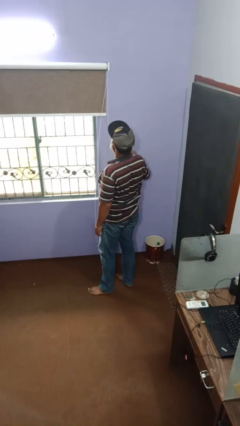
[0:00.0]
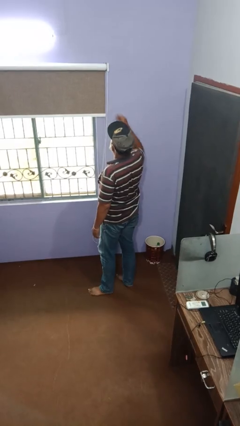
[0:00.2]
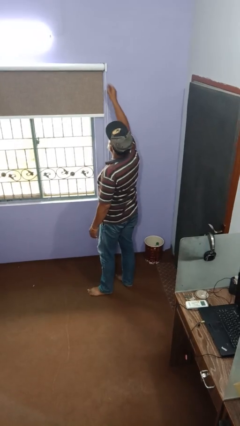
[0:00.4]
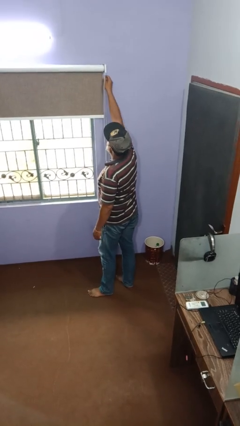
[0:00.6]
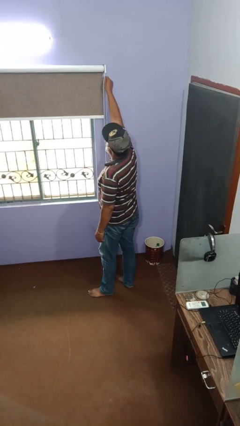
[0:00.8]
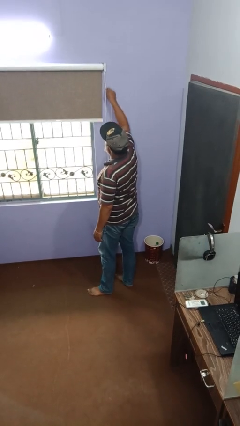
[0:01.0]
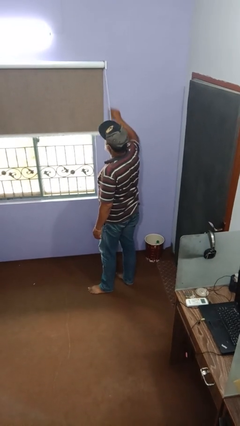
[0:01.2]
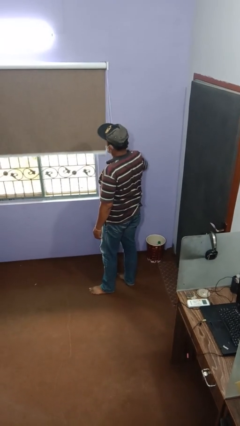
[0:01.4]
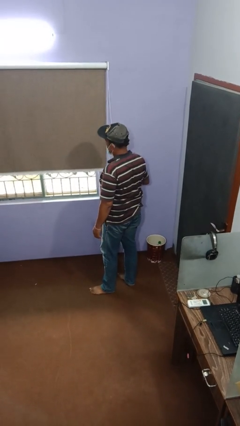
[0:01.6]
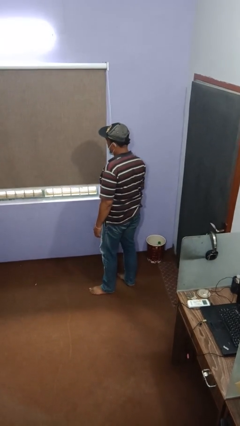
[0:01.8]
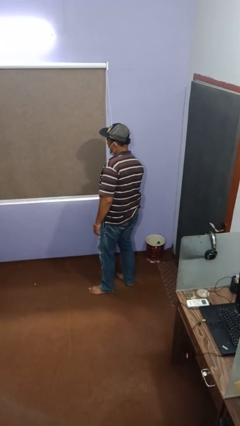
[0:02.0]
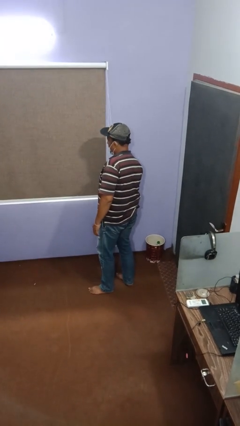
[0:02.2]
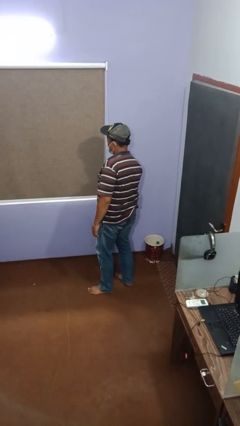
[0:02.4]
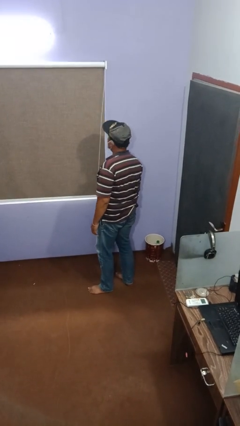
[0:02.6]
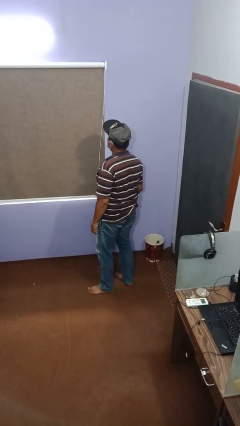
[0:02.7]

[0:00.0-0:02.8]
person closes curtains

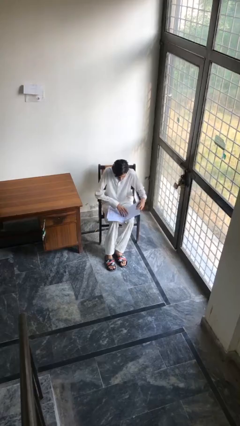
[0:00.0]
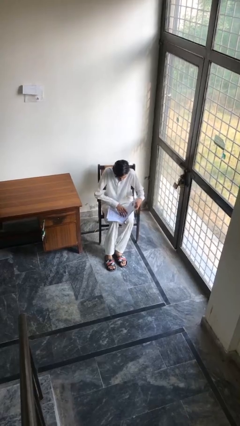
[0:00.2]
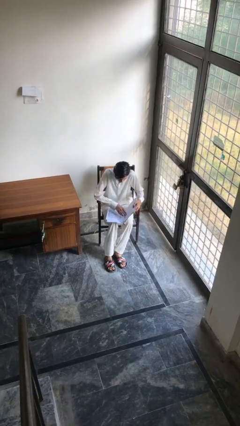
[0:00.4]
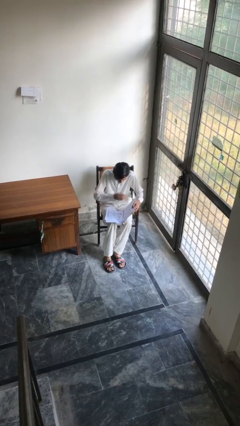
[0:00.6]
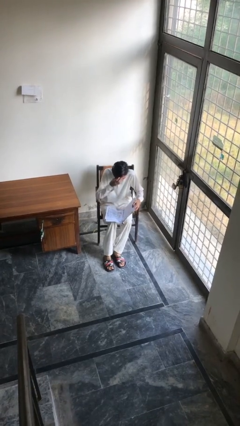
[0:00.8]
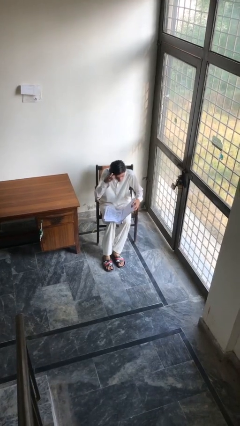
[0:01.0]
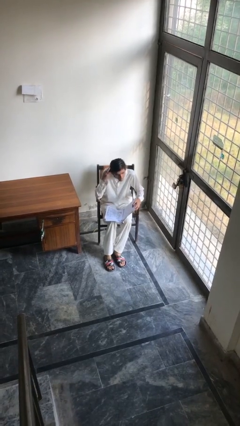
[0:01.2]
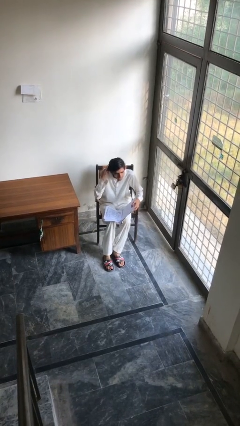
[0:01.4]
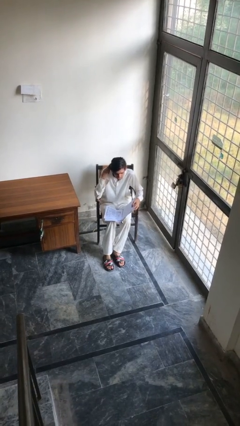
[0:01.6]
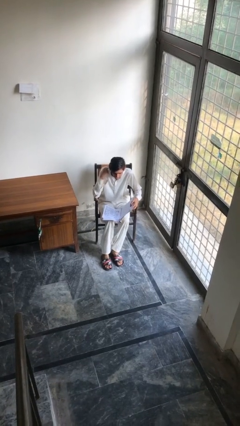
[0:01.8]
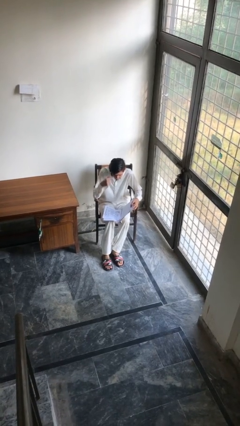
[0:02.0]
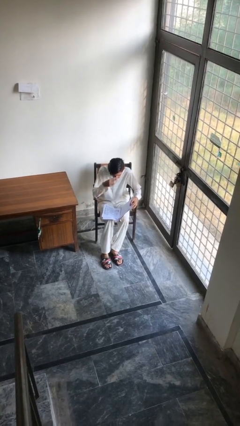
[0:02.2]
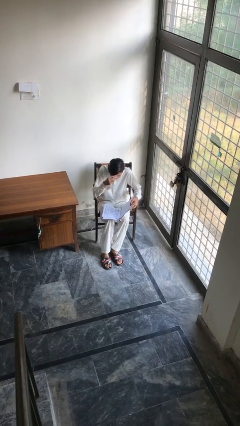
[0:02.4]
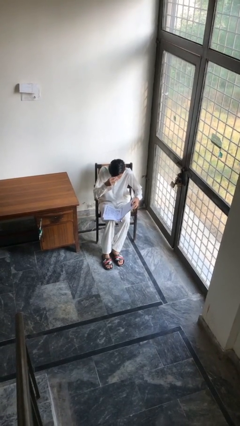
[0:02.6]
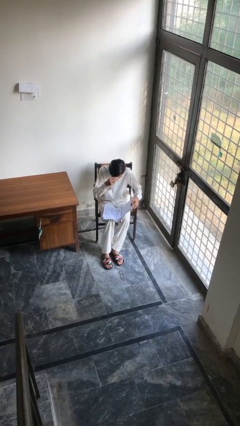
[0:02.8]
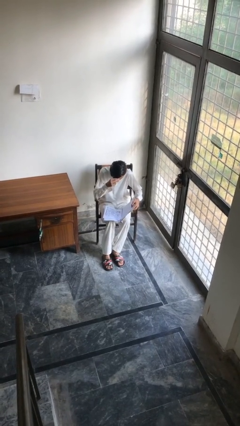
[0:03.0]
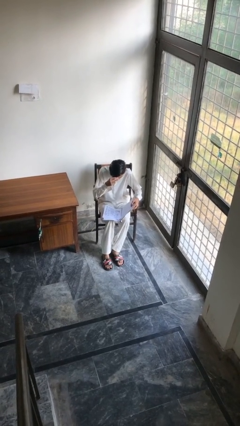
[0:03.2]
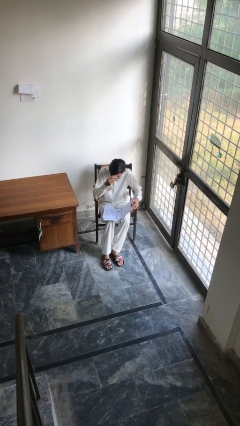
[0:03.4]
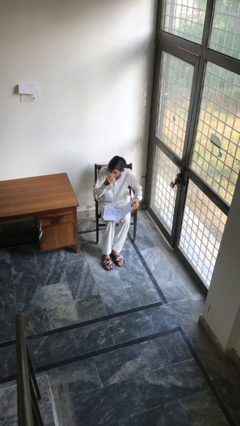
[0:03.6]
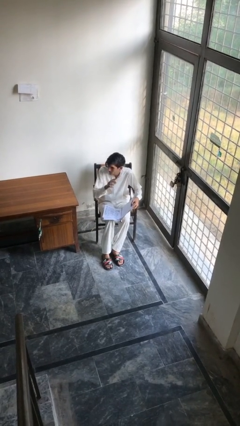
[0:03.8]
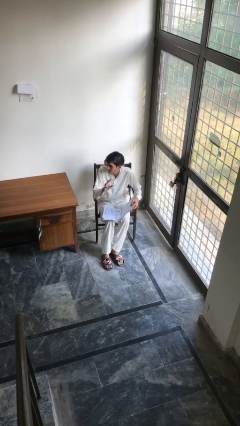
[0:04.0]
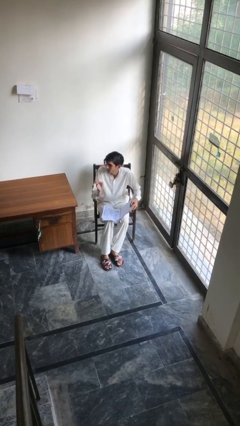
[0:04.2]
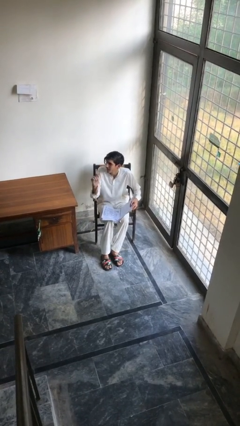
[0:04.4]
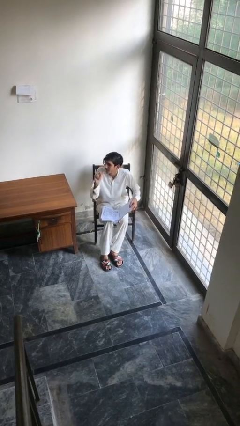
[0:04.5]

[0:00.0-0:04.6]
person reads document

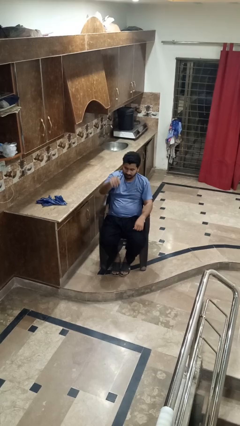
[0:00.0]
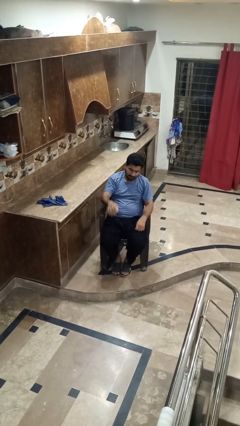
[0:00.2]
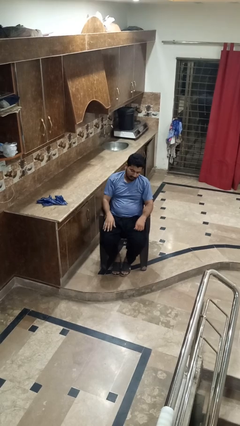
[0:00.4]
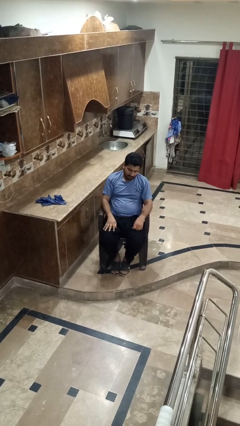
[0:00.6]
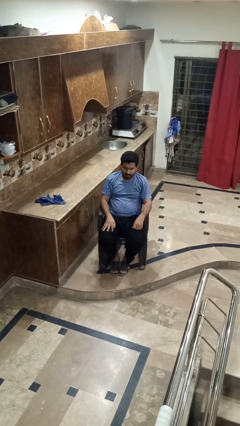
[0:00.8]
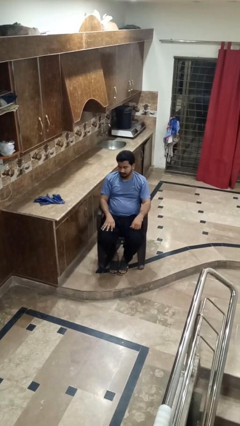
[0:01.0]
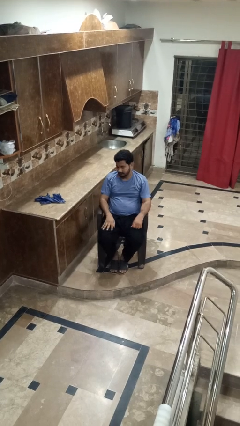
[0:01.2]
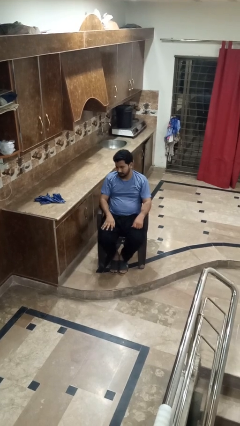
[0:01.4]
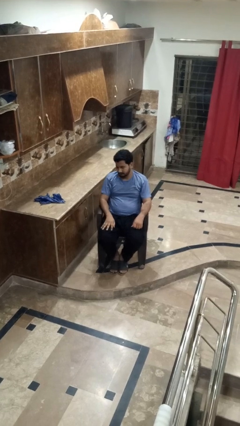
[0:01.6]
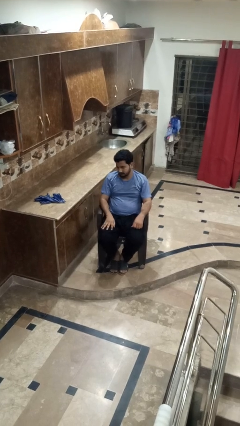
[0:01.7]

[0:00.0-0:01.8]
person gestures lower hand

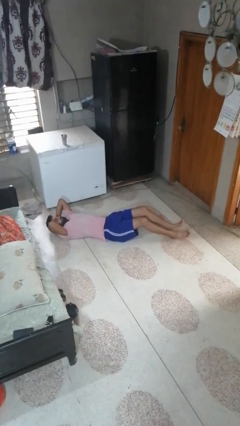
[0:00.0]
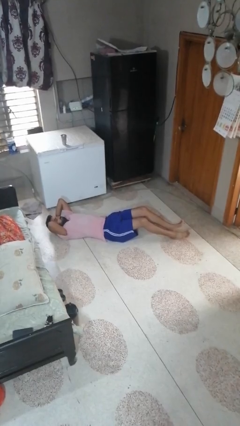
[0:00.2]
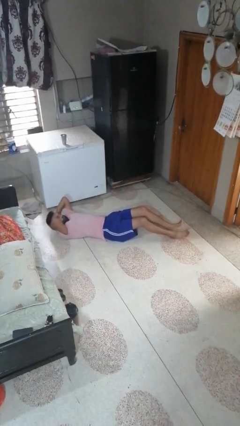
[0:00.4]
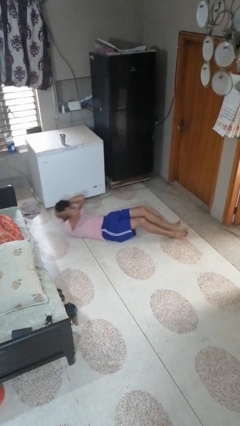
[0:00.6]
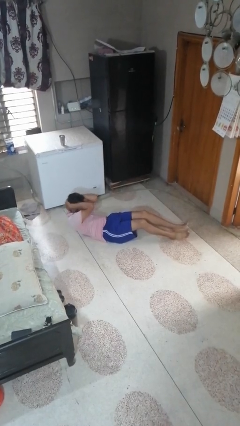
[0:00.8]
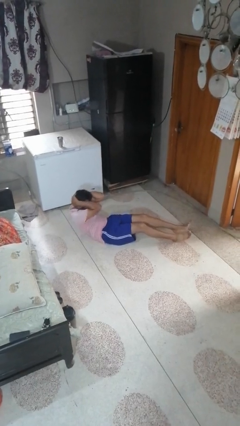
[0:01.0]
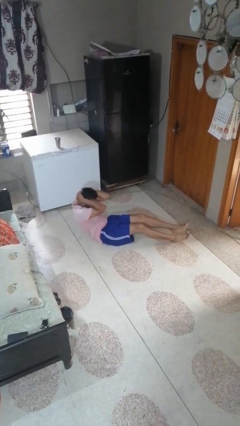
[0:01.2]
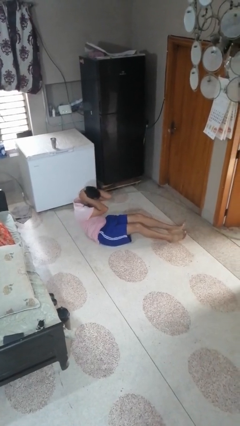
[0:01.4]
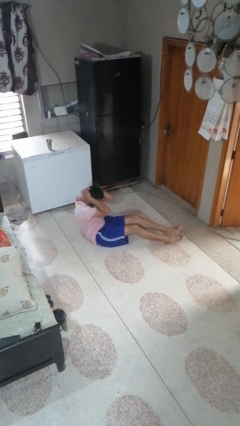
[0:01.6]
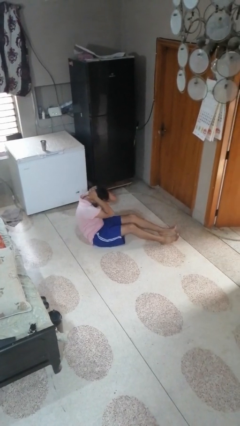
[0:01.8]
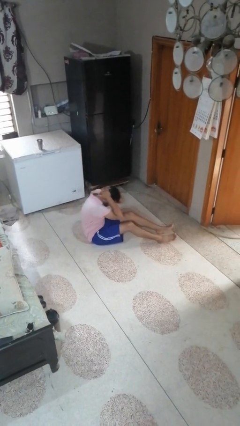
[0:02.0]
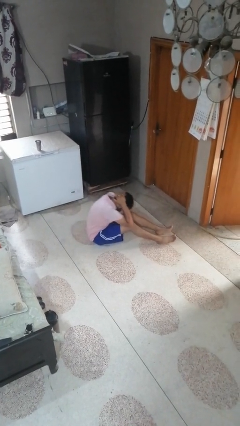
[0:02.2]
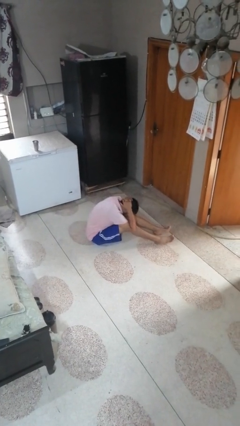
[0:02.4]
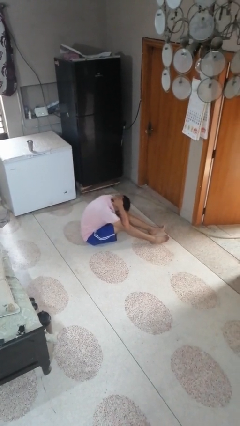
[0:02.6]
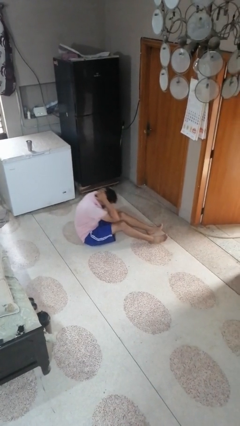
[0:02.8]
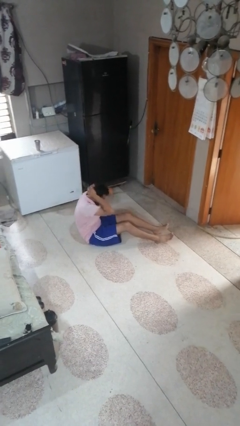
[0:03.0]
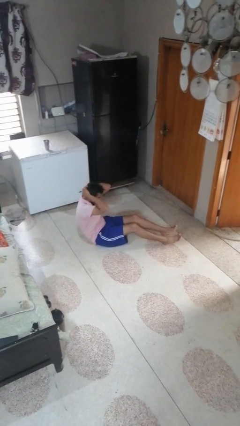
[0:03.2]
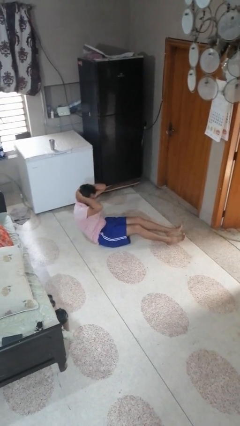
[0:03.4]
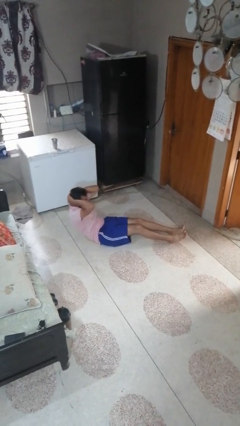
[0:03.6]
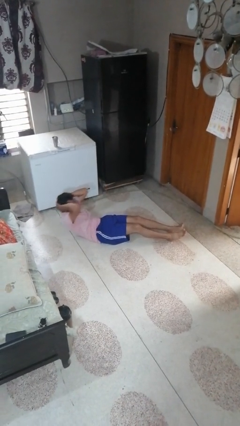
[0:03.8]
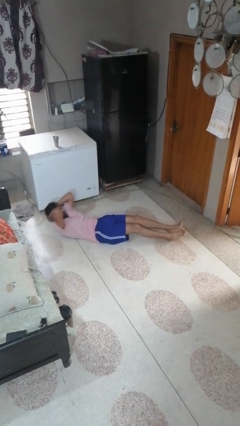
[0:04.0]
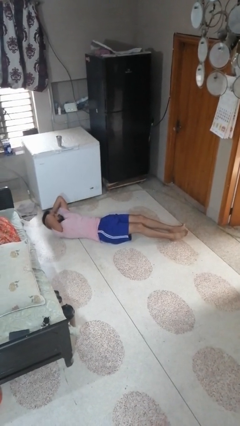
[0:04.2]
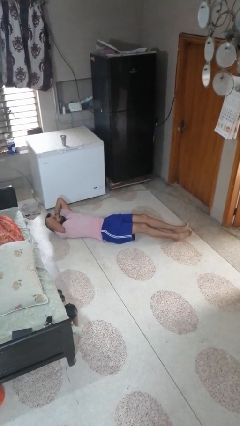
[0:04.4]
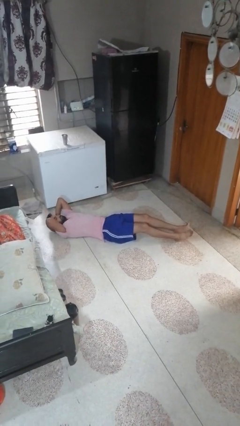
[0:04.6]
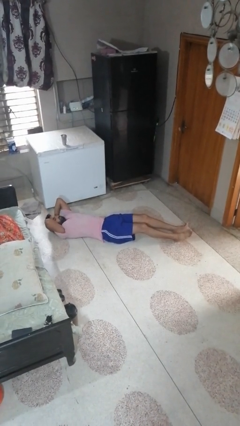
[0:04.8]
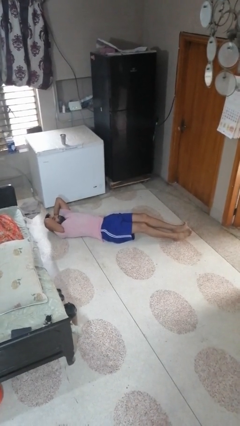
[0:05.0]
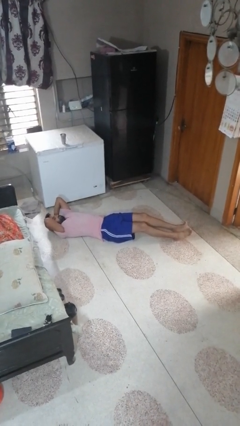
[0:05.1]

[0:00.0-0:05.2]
person exercises with situp

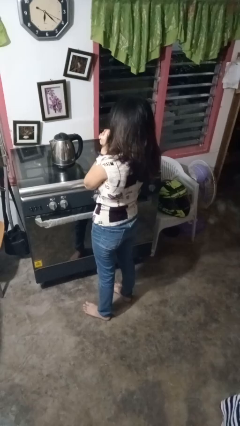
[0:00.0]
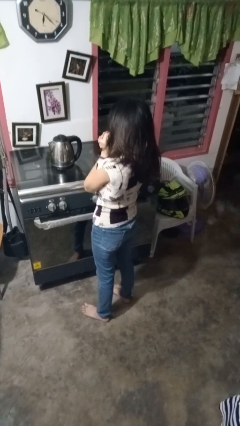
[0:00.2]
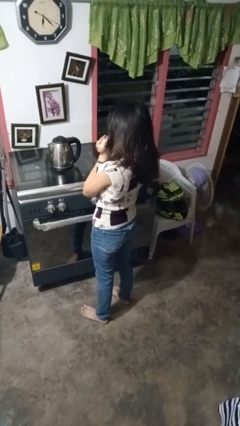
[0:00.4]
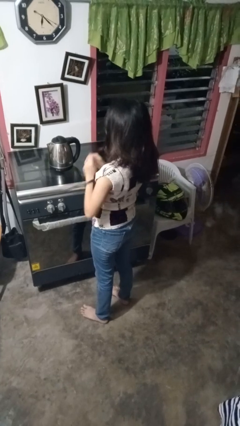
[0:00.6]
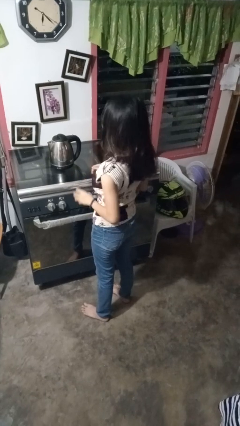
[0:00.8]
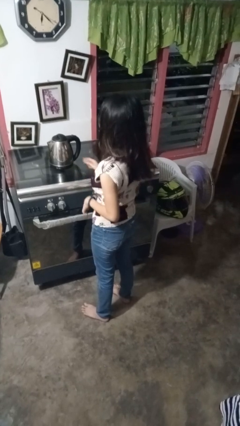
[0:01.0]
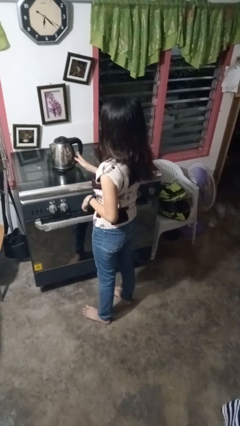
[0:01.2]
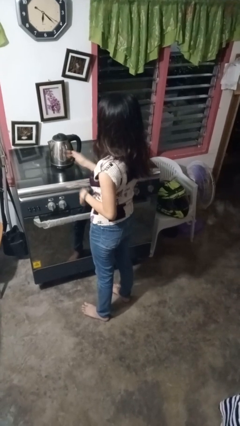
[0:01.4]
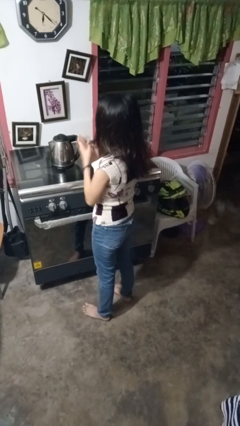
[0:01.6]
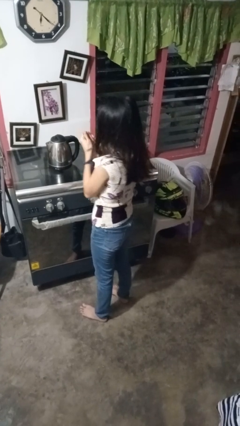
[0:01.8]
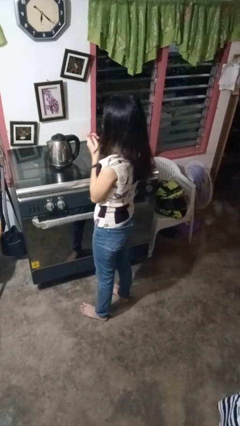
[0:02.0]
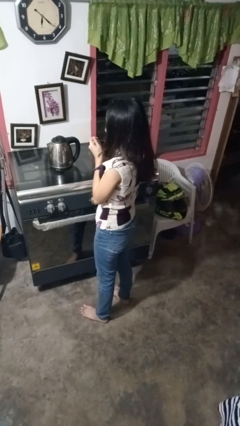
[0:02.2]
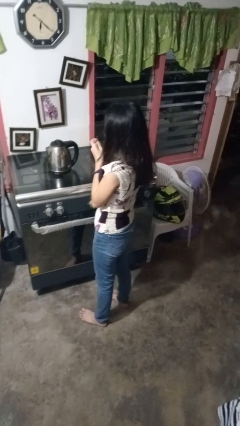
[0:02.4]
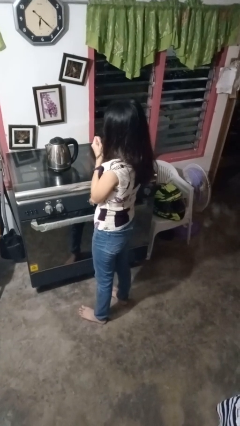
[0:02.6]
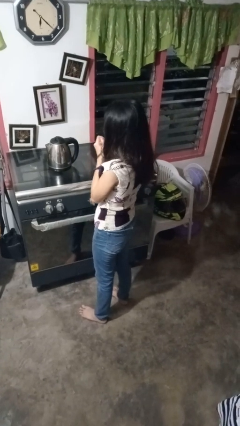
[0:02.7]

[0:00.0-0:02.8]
person takes off hoodie

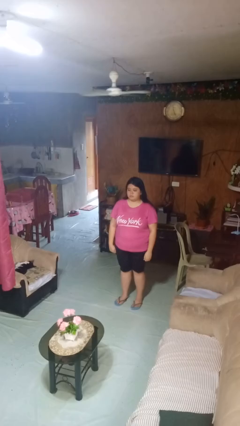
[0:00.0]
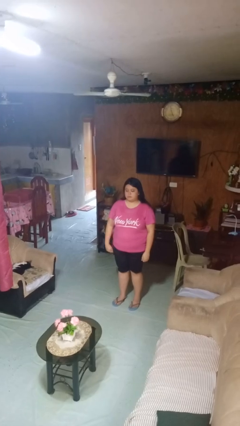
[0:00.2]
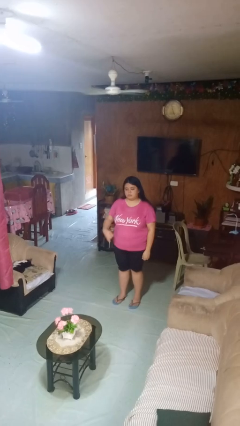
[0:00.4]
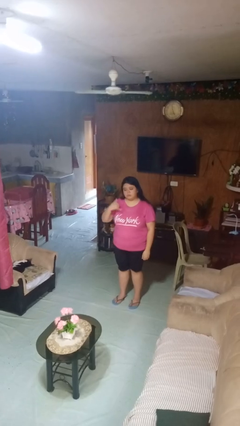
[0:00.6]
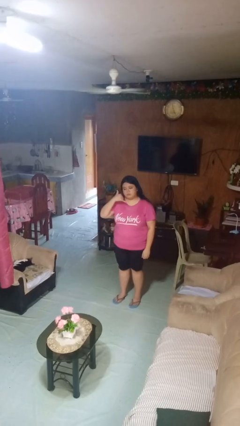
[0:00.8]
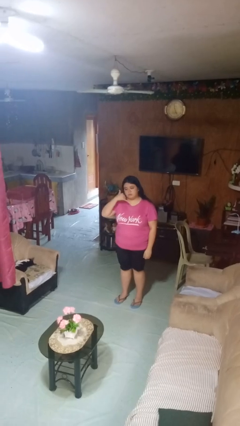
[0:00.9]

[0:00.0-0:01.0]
person gestures call me
